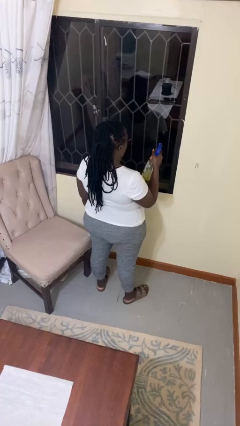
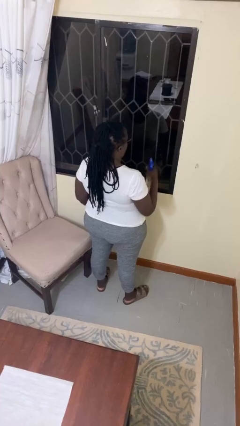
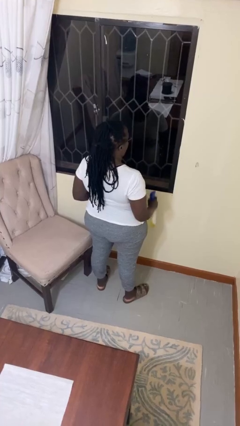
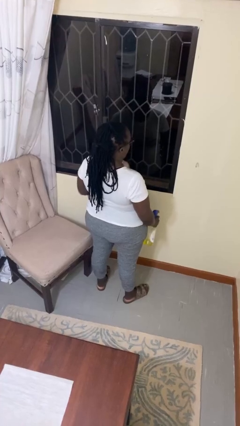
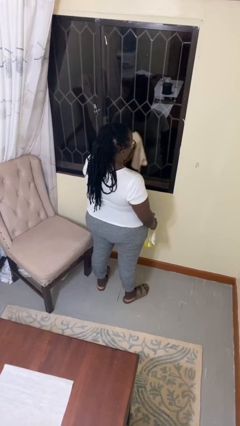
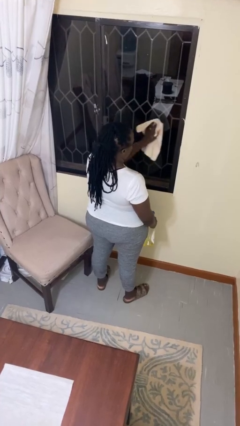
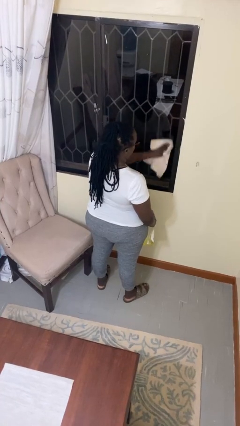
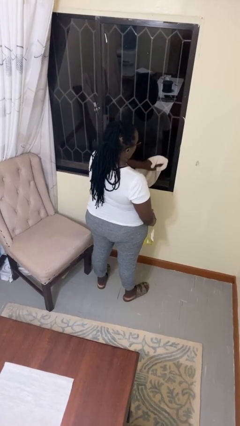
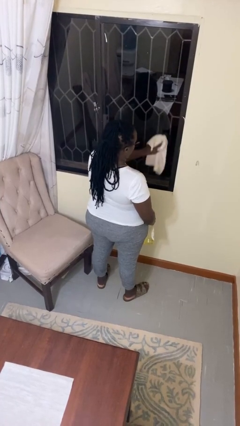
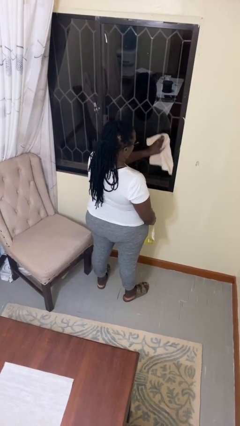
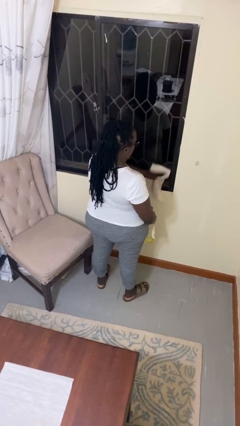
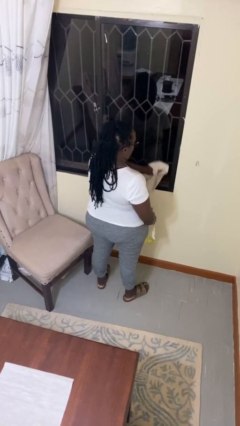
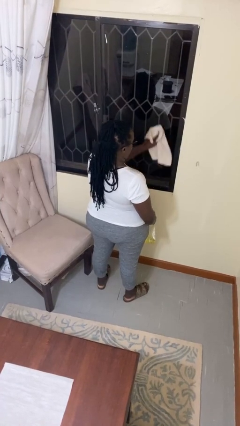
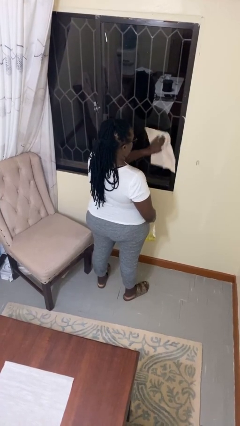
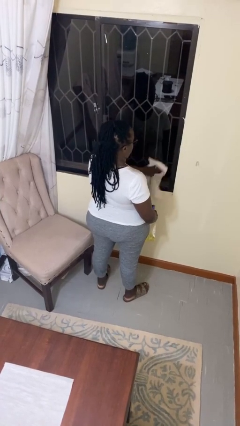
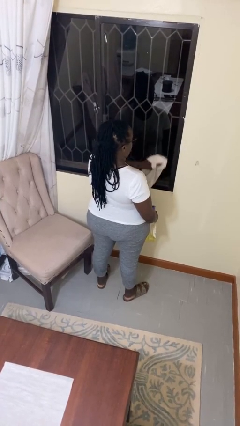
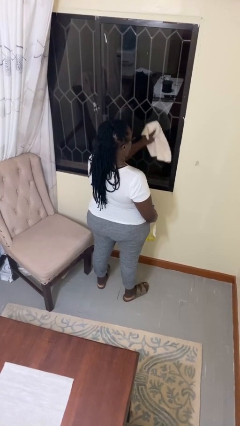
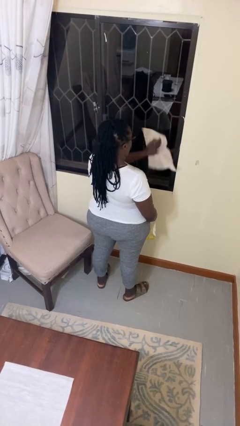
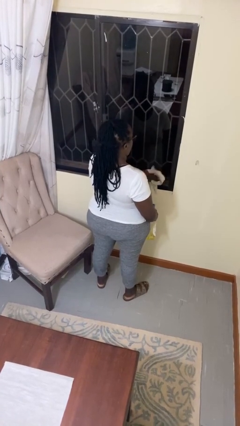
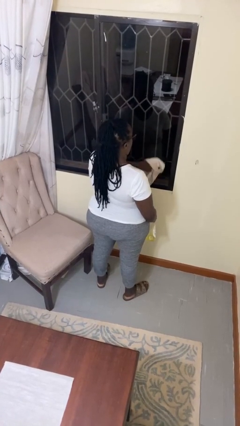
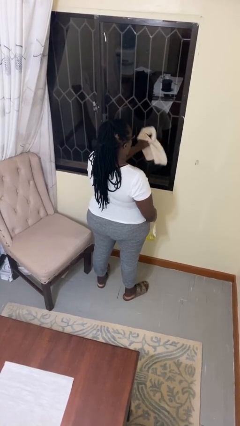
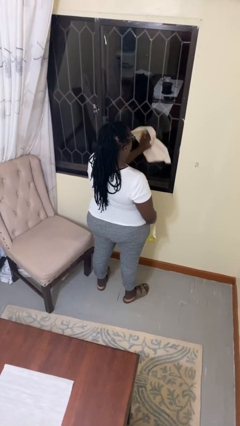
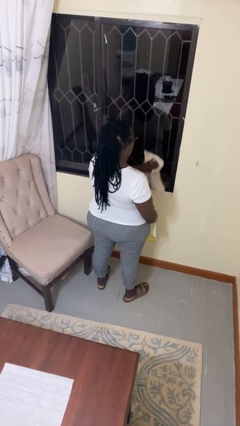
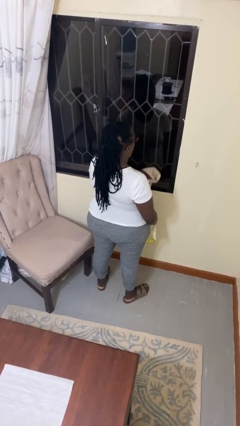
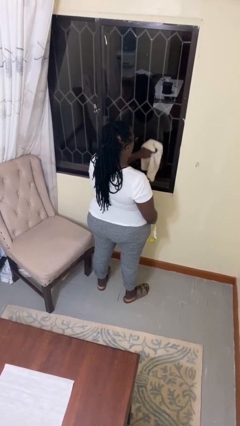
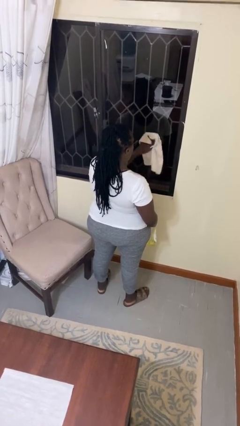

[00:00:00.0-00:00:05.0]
person washes window

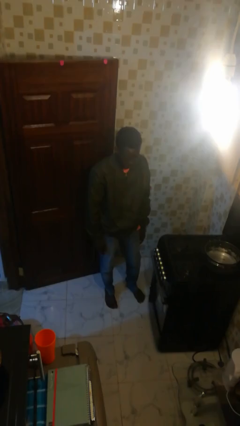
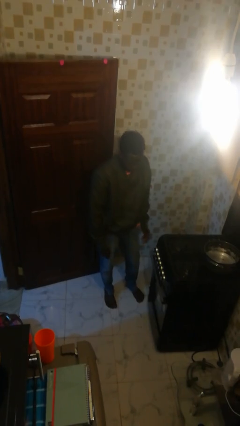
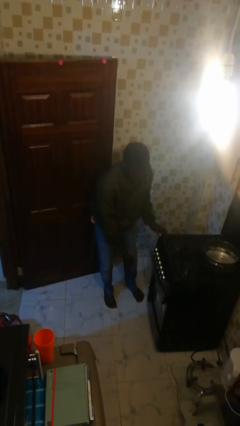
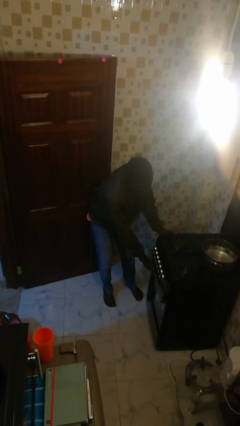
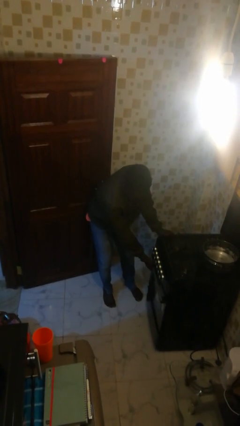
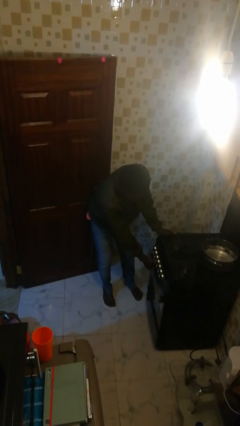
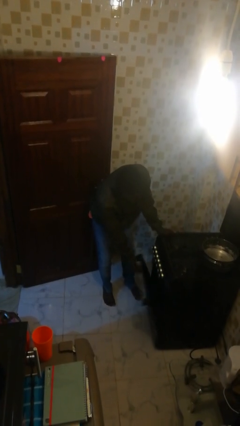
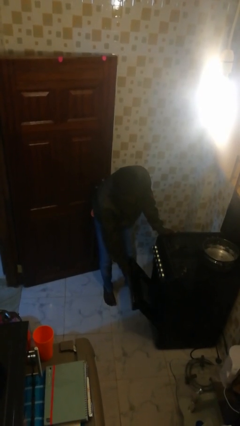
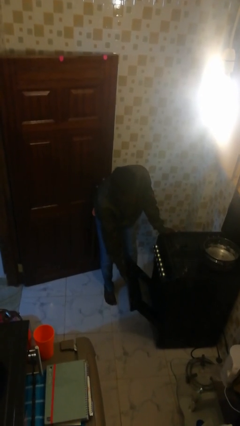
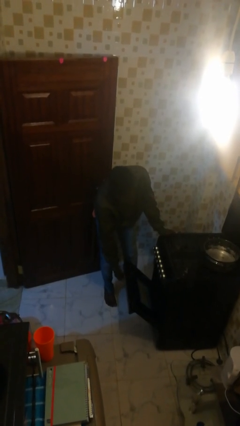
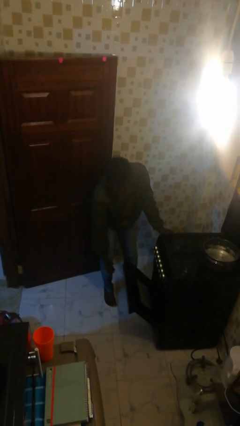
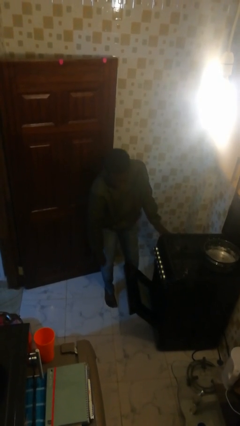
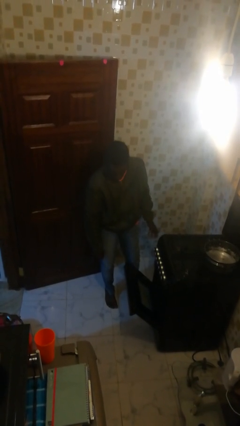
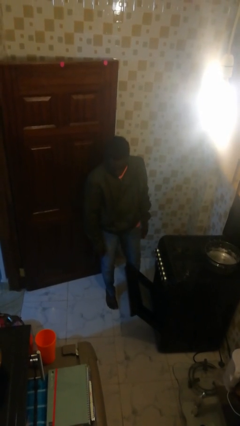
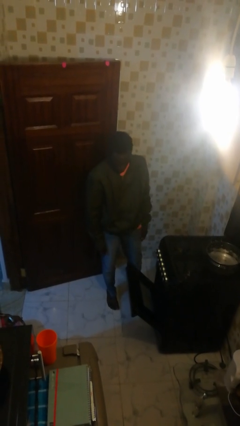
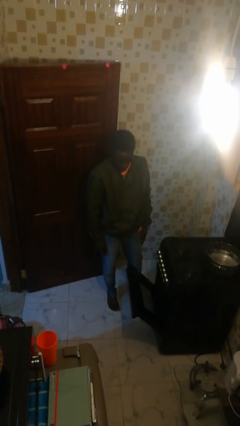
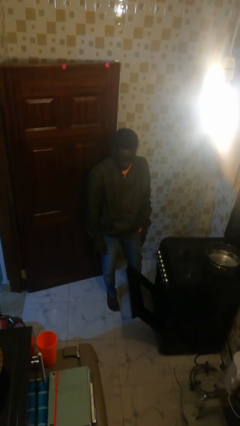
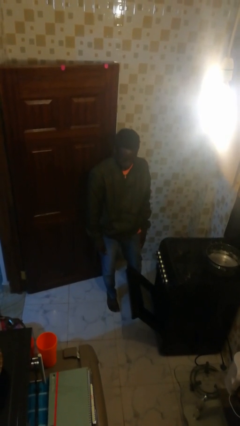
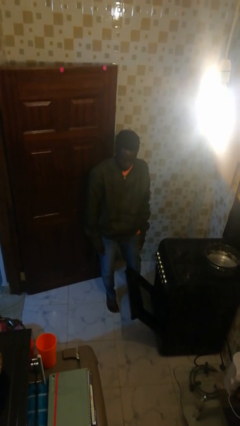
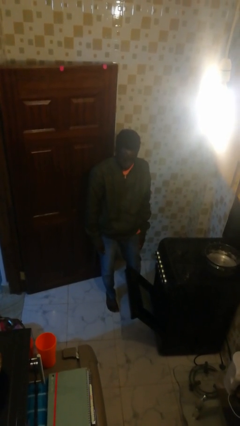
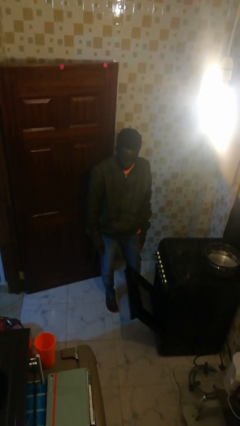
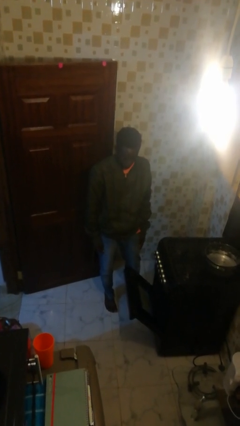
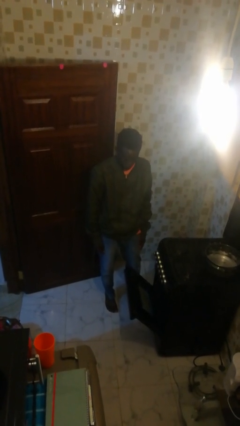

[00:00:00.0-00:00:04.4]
person opens oven door

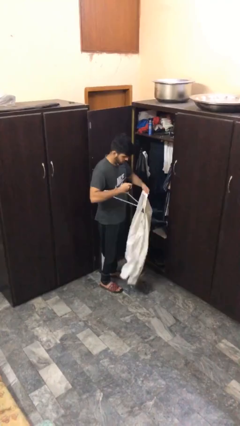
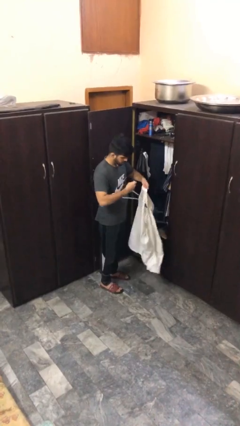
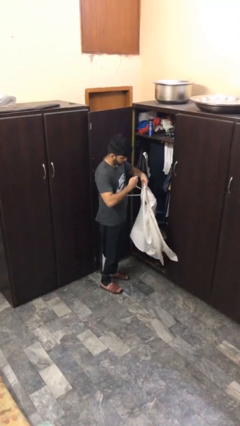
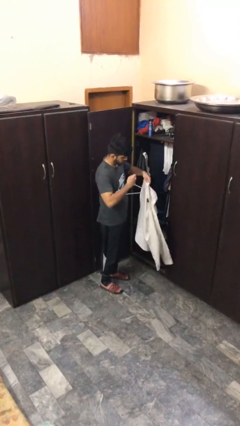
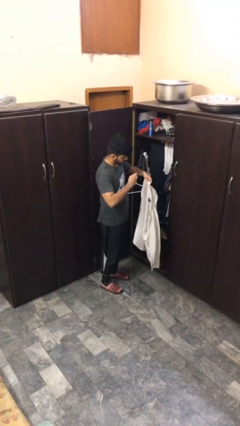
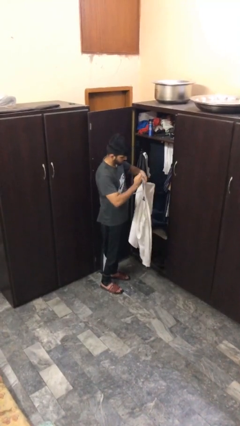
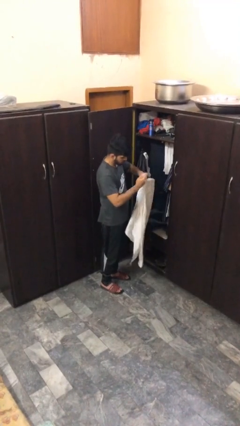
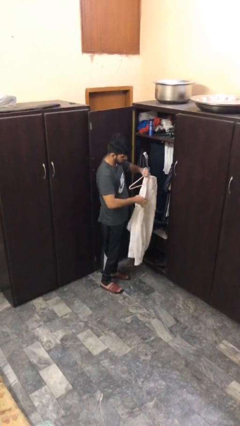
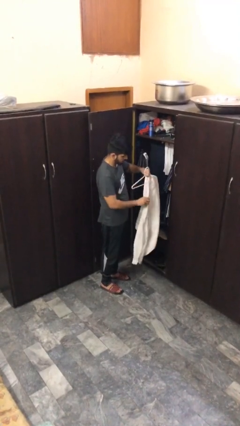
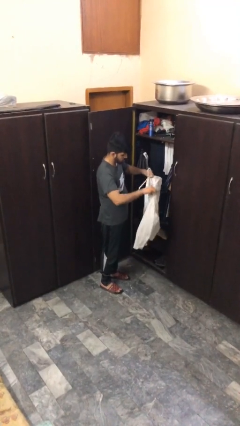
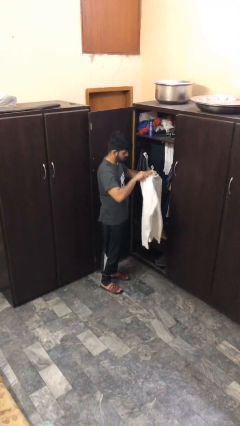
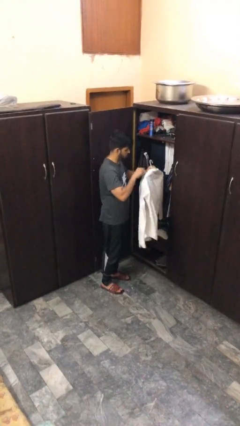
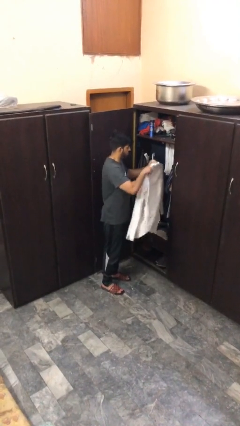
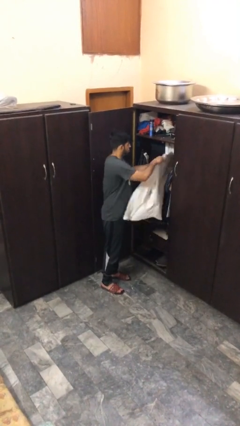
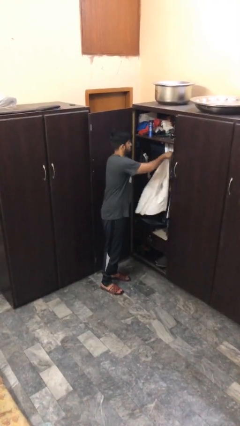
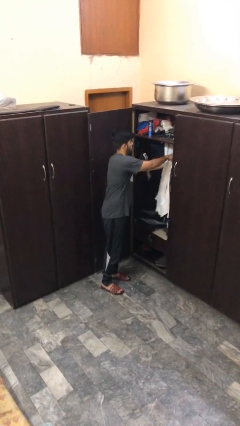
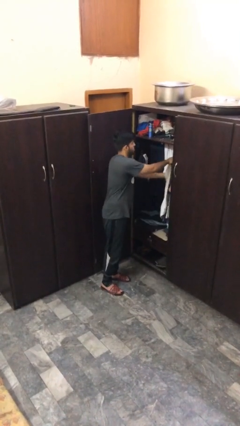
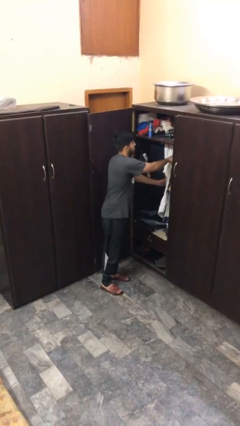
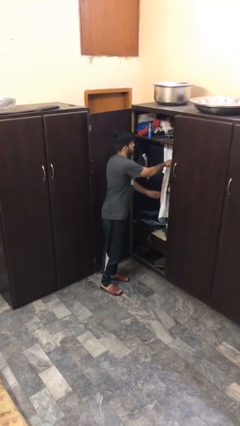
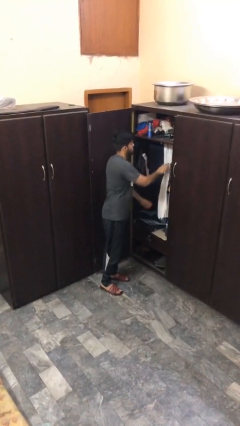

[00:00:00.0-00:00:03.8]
person puts clothes into closet

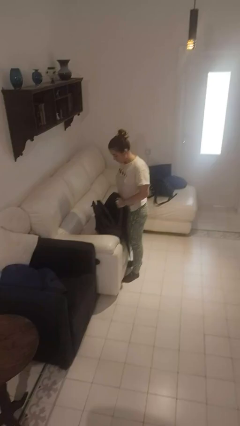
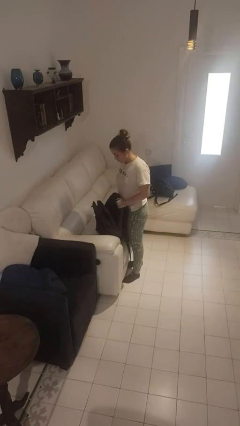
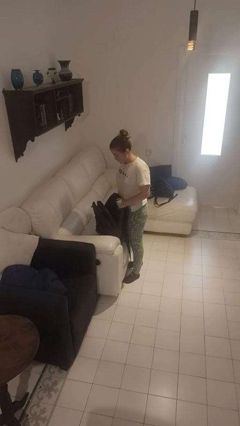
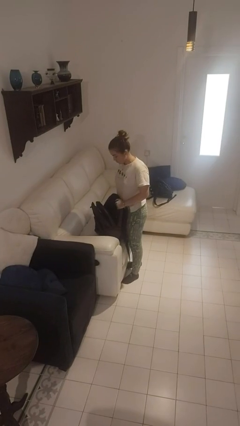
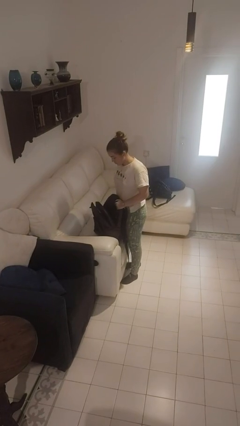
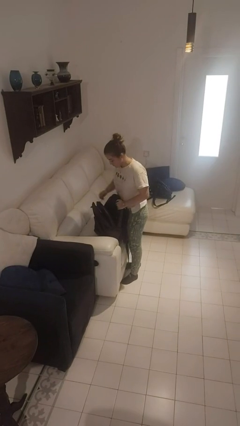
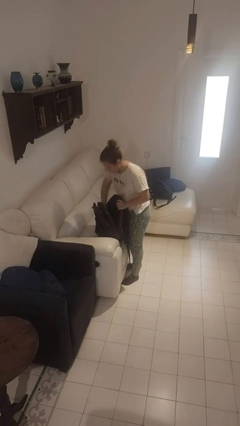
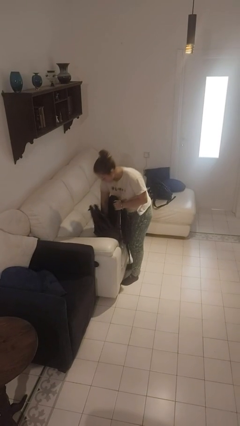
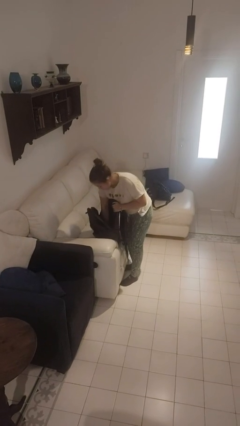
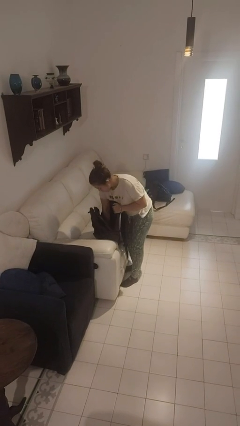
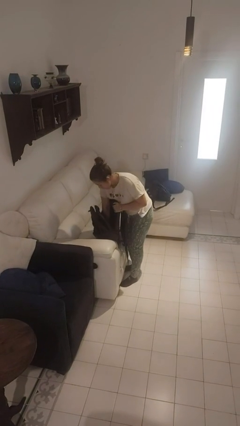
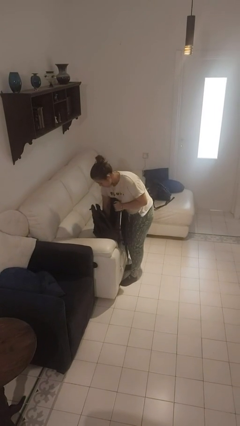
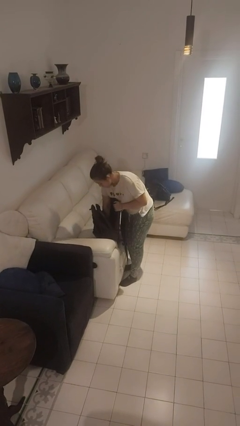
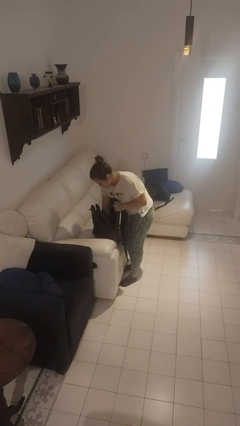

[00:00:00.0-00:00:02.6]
person searches in backpack

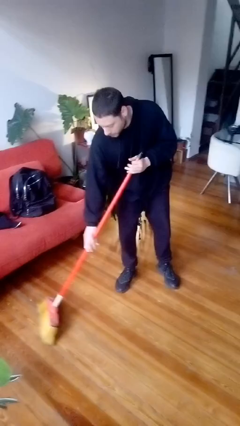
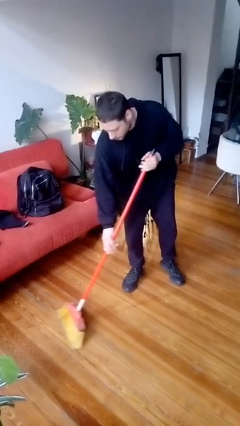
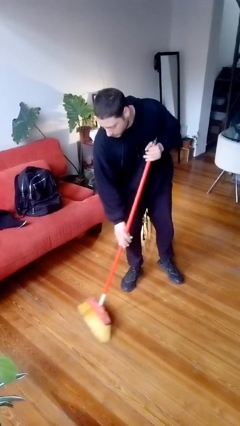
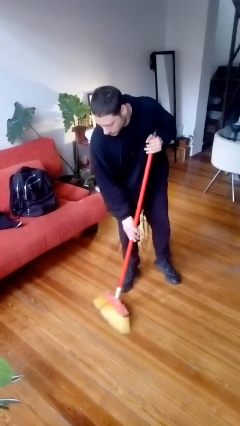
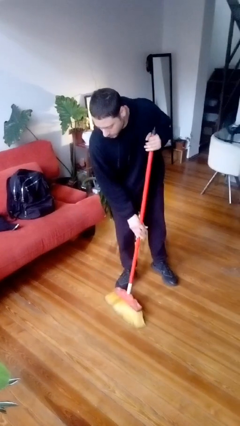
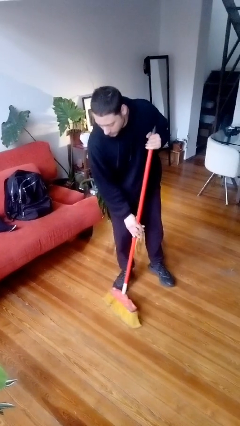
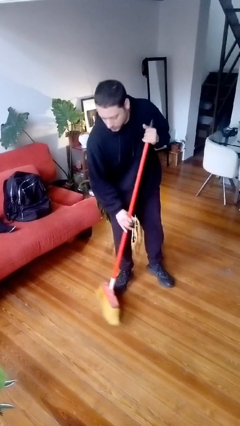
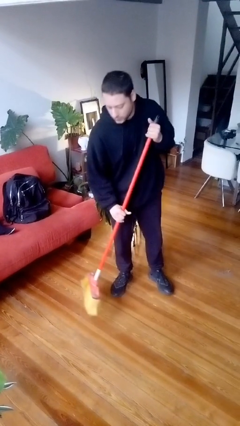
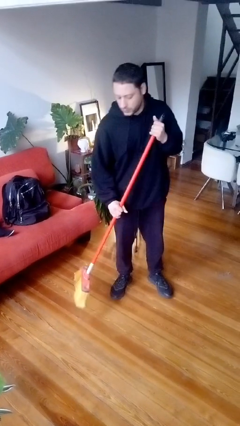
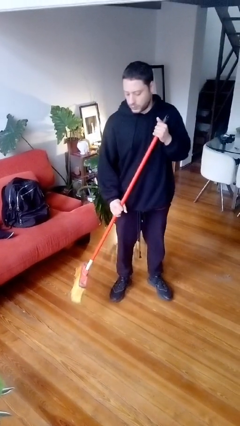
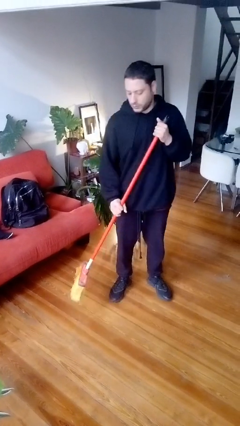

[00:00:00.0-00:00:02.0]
person sweeps floor
